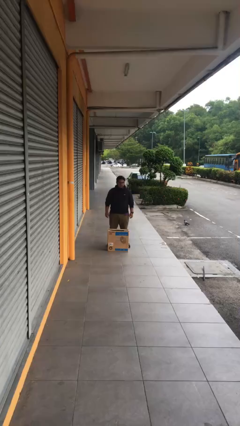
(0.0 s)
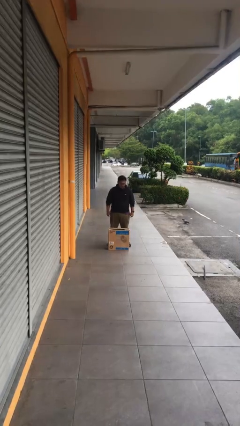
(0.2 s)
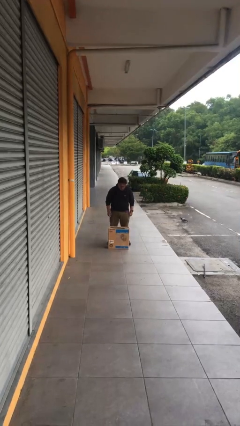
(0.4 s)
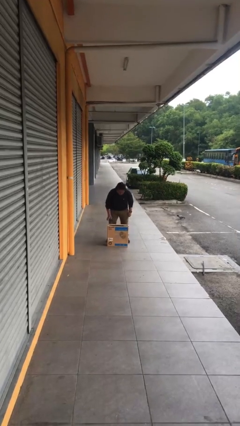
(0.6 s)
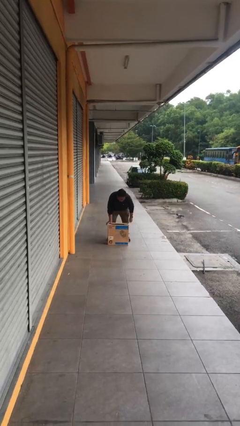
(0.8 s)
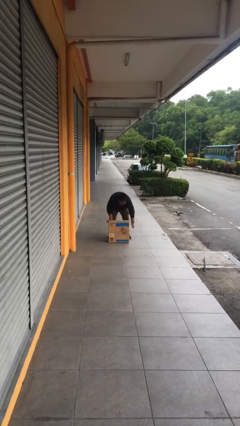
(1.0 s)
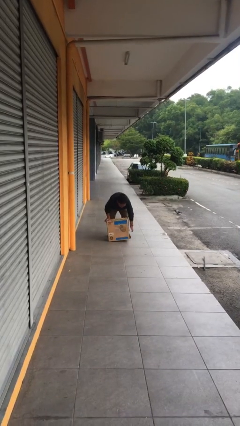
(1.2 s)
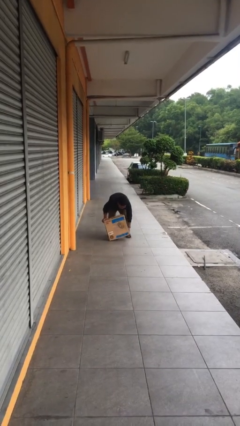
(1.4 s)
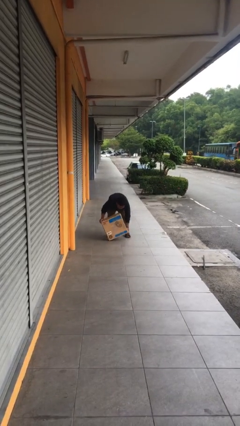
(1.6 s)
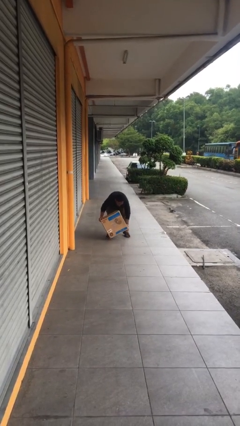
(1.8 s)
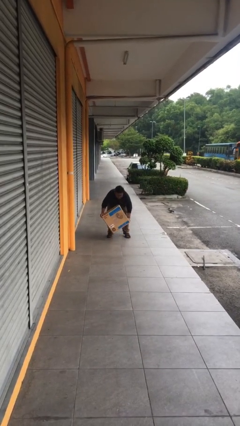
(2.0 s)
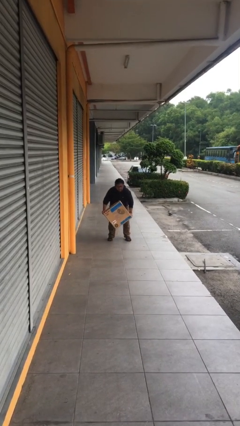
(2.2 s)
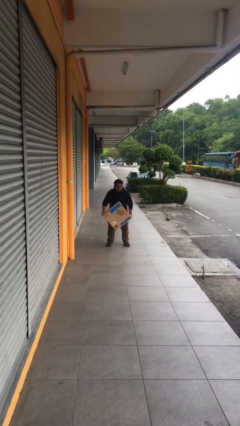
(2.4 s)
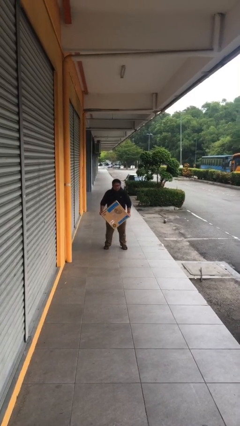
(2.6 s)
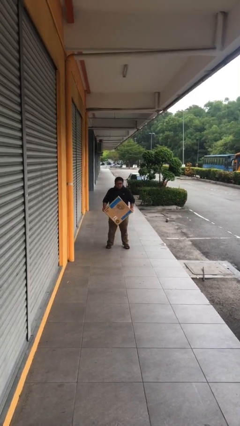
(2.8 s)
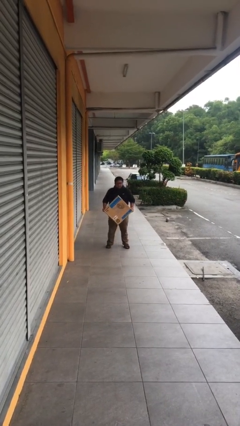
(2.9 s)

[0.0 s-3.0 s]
person picks up object from floor

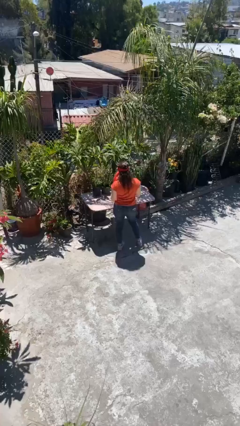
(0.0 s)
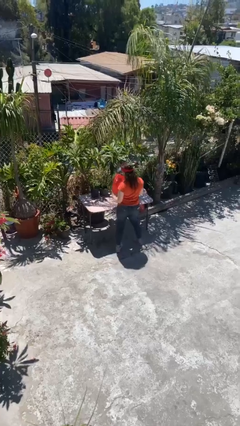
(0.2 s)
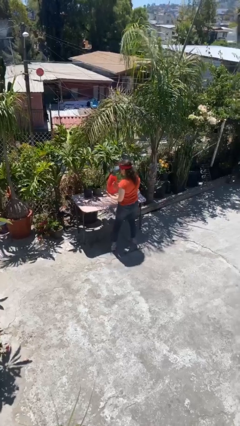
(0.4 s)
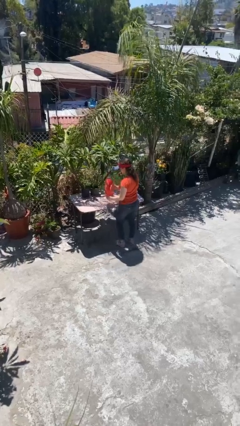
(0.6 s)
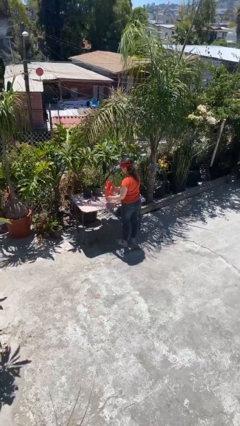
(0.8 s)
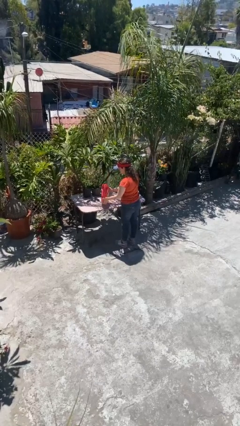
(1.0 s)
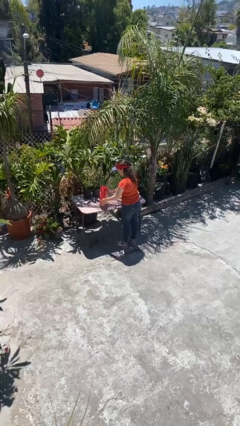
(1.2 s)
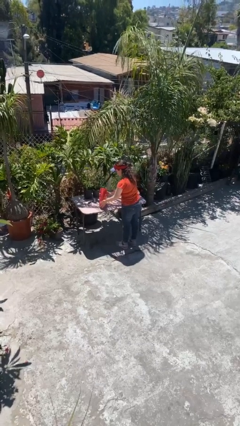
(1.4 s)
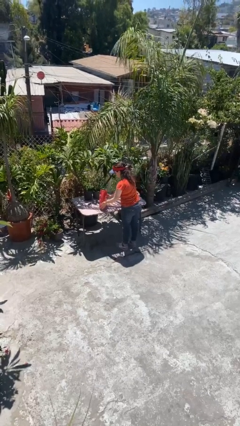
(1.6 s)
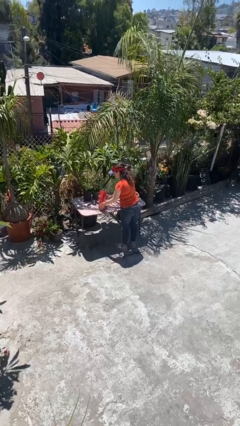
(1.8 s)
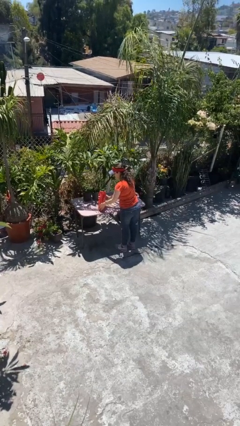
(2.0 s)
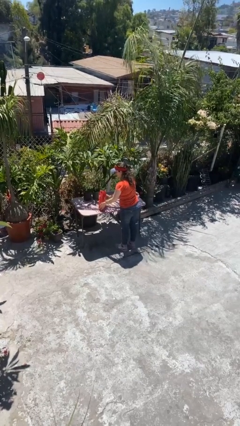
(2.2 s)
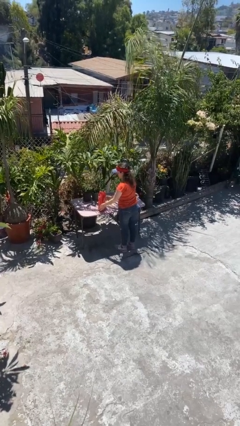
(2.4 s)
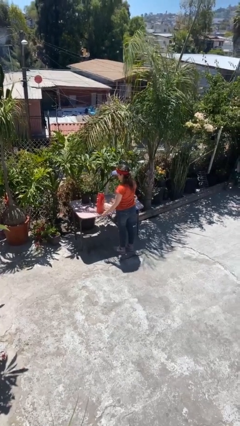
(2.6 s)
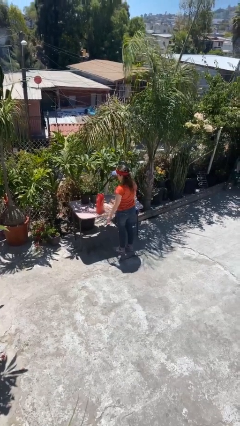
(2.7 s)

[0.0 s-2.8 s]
person puts down object on table

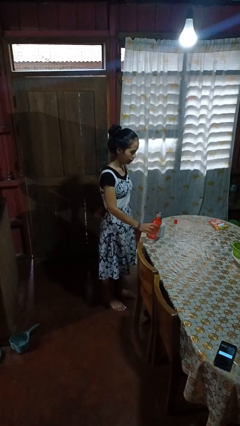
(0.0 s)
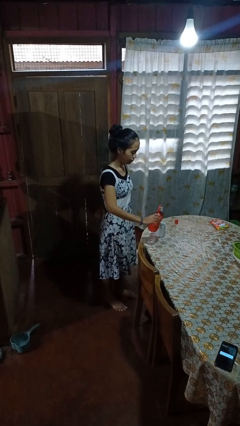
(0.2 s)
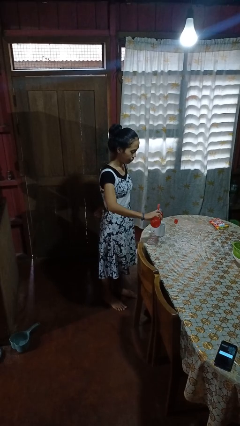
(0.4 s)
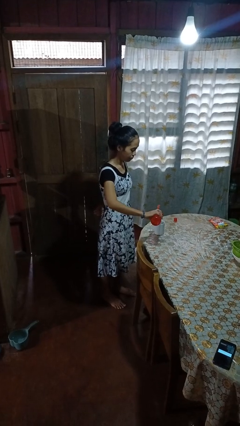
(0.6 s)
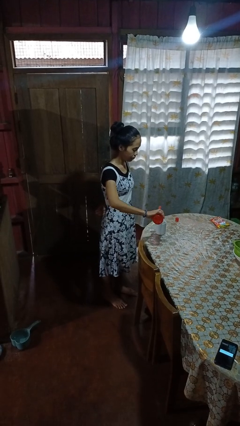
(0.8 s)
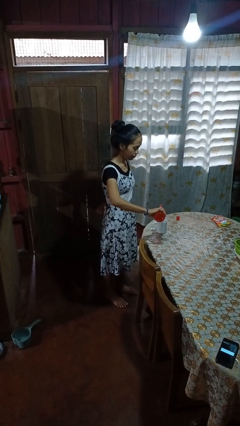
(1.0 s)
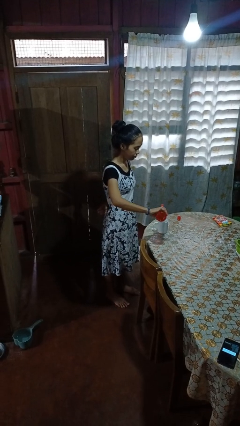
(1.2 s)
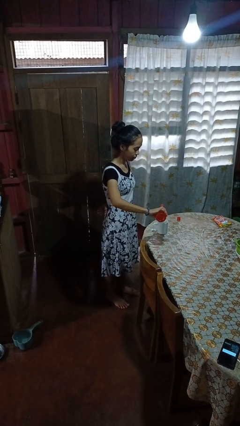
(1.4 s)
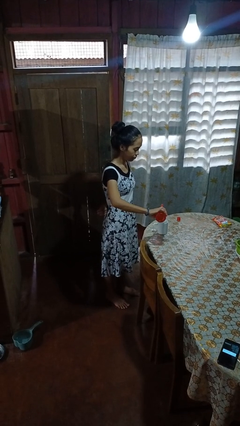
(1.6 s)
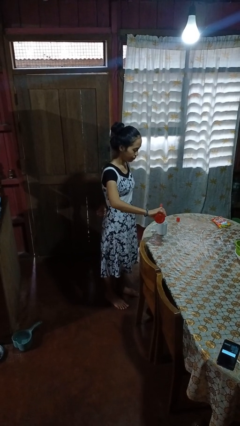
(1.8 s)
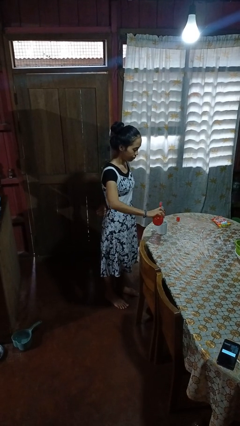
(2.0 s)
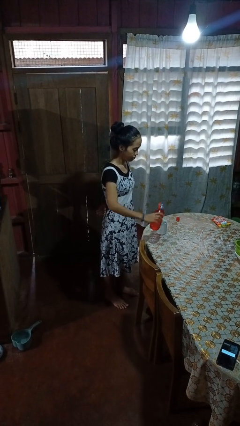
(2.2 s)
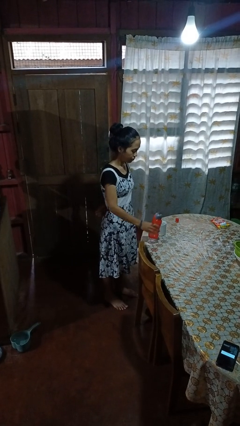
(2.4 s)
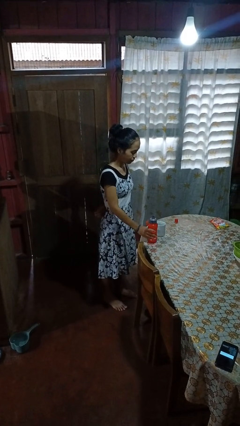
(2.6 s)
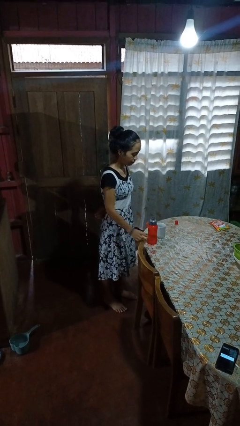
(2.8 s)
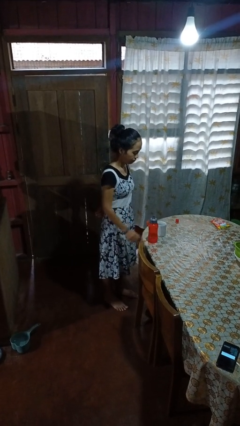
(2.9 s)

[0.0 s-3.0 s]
person pours liquid into cup

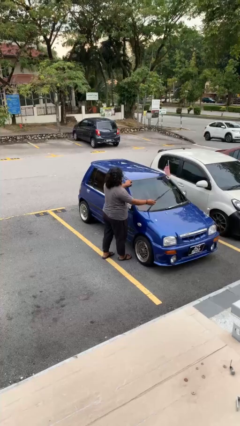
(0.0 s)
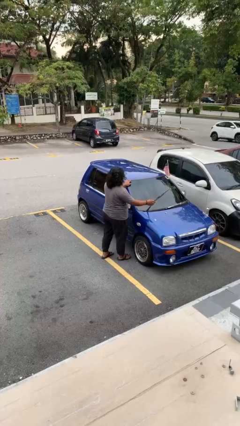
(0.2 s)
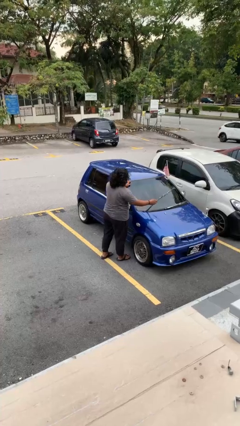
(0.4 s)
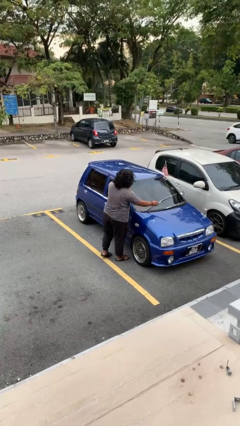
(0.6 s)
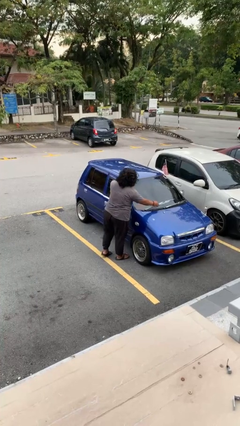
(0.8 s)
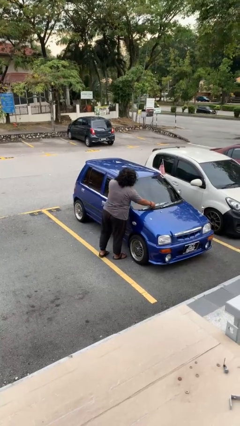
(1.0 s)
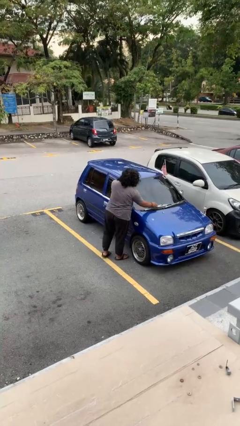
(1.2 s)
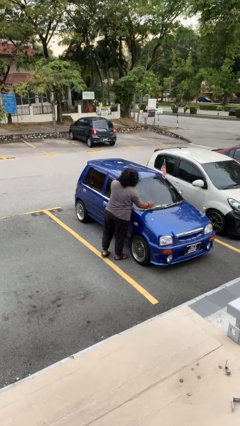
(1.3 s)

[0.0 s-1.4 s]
person flips down car wipers

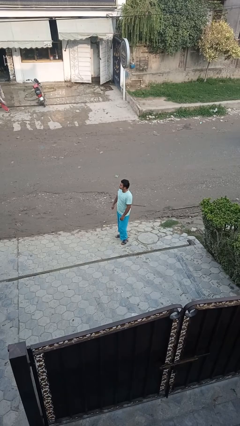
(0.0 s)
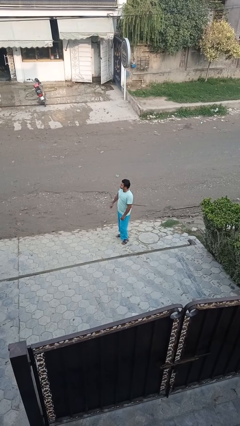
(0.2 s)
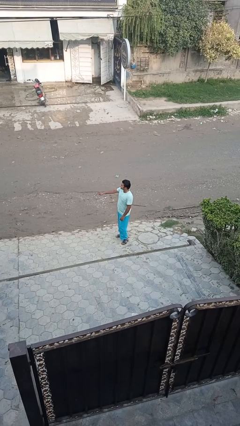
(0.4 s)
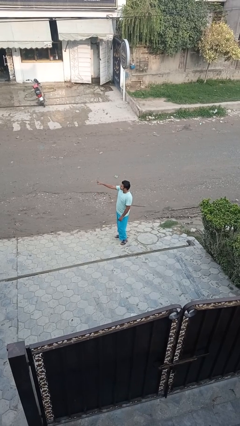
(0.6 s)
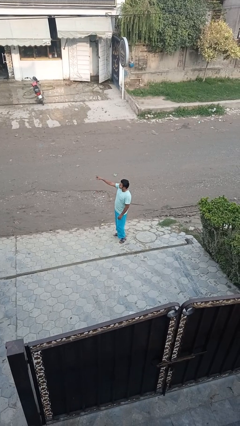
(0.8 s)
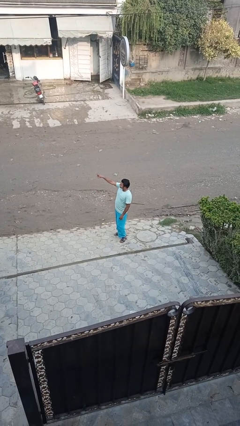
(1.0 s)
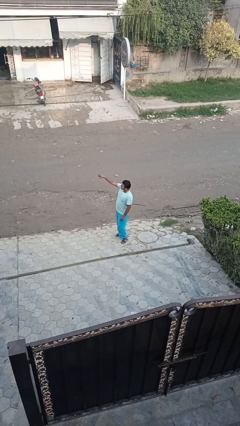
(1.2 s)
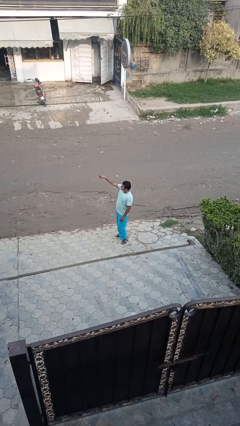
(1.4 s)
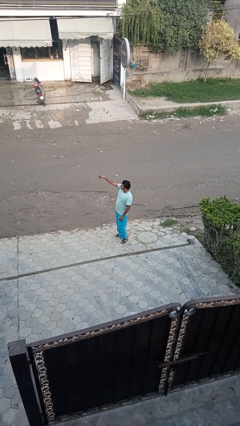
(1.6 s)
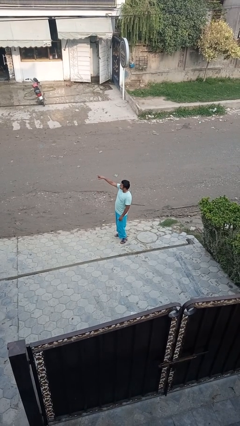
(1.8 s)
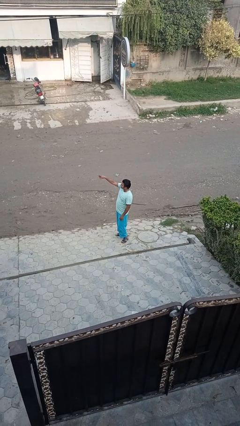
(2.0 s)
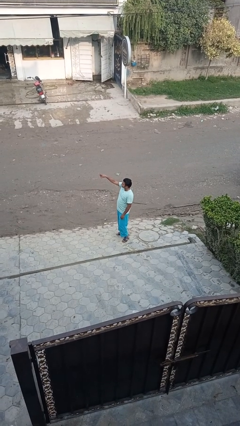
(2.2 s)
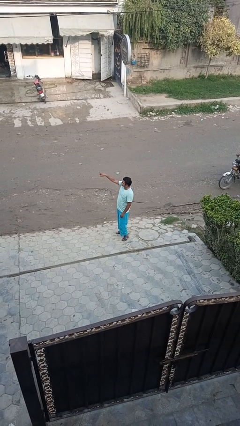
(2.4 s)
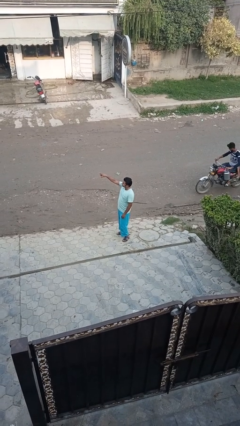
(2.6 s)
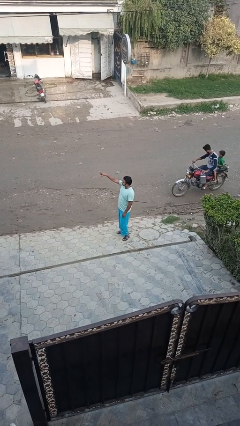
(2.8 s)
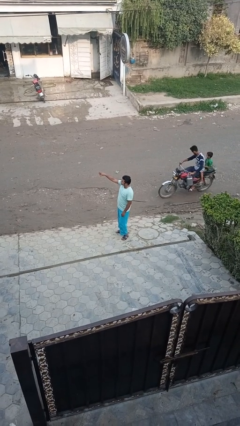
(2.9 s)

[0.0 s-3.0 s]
person points at person

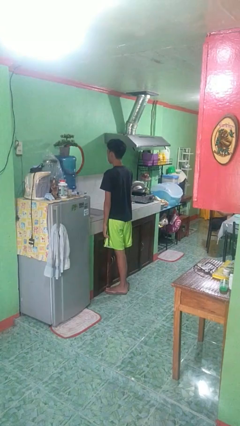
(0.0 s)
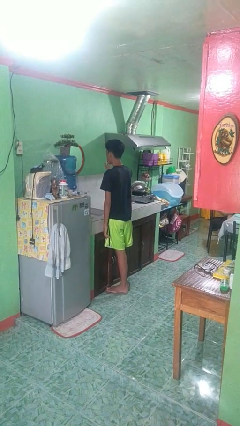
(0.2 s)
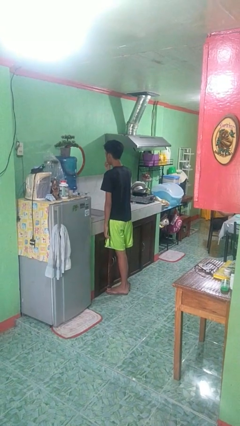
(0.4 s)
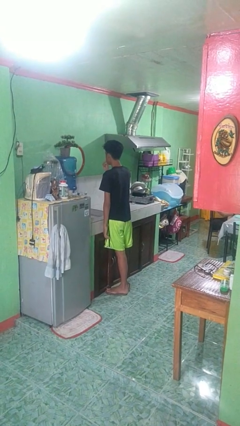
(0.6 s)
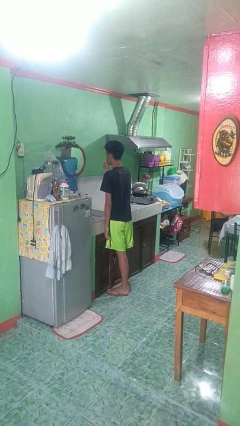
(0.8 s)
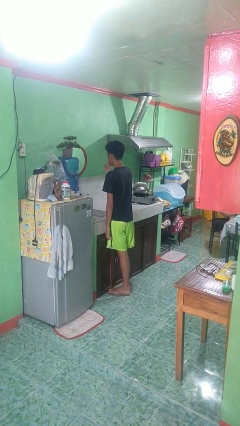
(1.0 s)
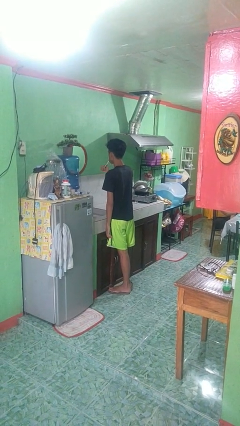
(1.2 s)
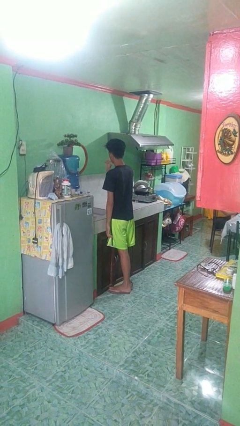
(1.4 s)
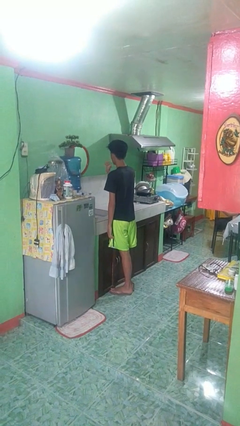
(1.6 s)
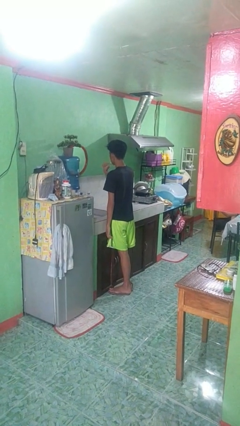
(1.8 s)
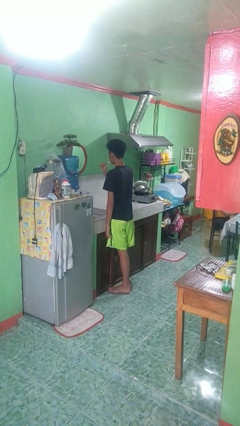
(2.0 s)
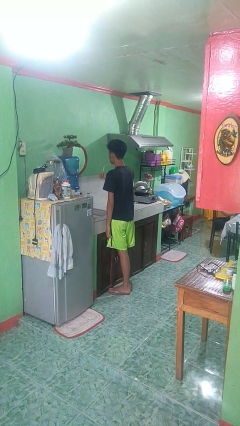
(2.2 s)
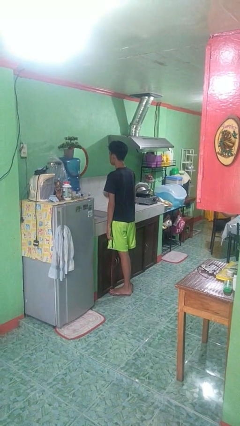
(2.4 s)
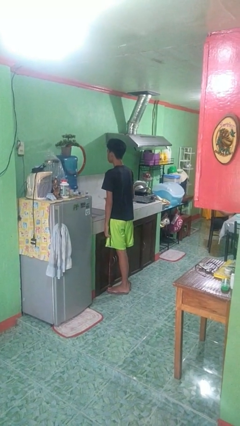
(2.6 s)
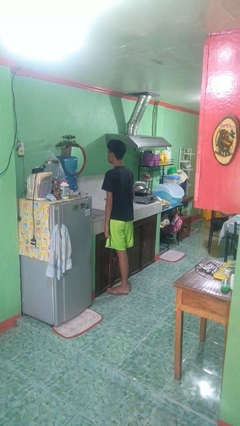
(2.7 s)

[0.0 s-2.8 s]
person brushes teeth

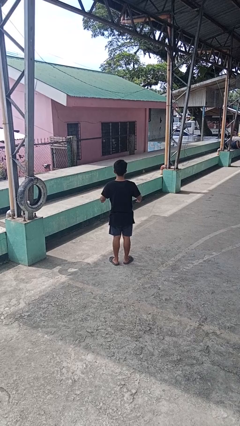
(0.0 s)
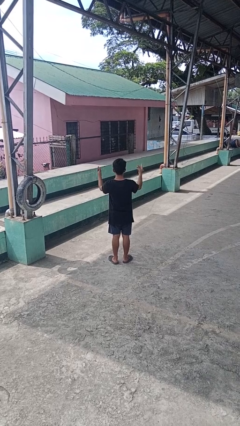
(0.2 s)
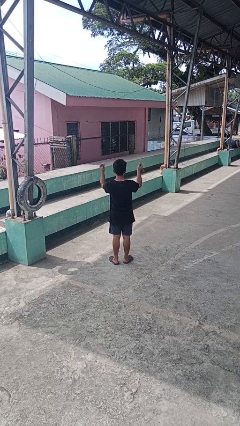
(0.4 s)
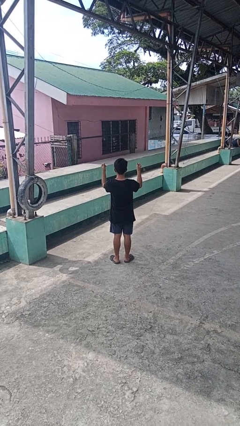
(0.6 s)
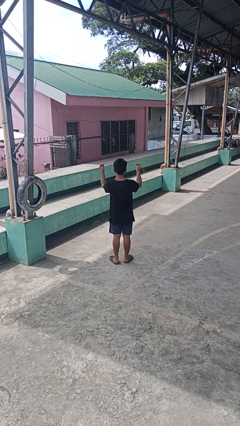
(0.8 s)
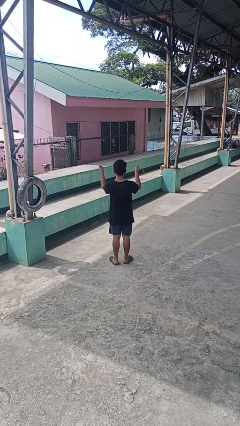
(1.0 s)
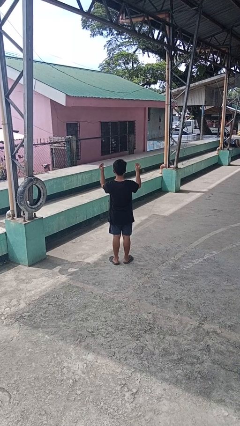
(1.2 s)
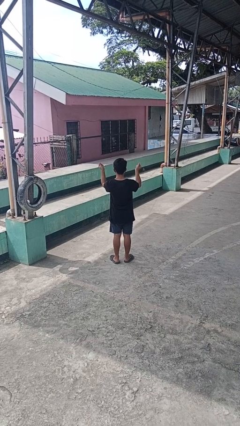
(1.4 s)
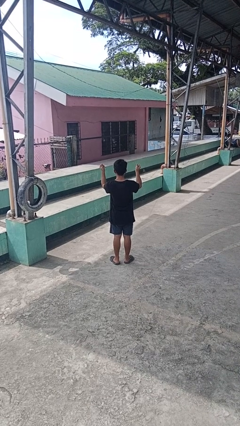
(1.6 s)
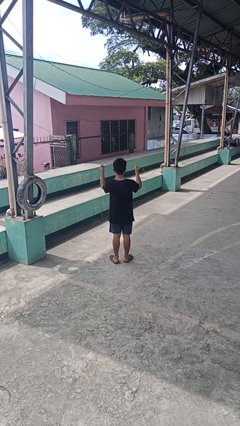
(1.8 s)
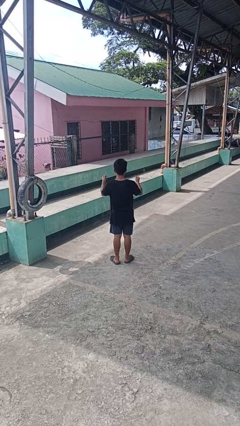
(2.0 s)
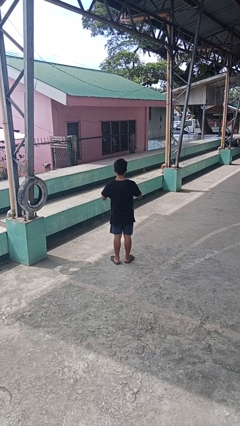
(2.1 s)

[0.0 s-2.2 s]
person snaps fingers
